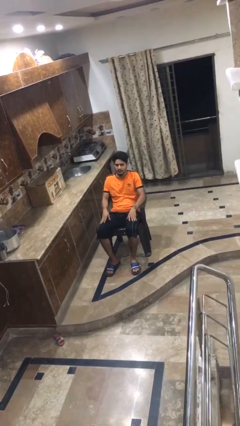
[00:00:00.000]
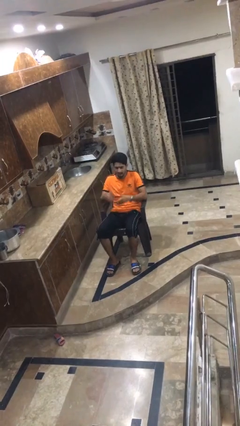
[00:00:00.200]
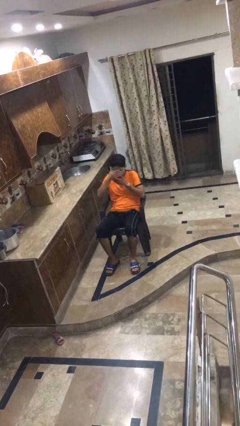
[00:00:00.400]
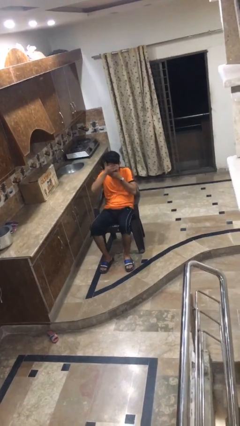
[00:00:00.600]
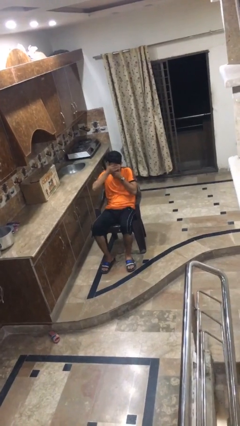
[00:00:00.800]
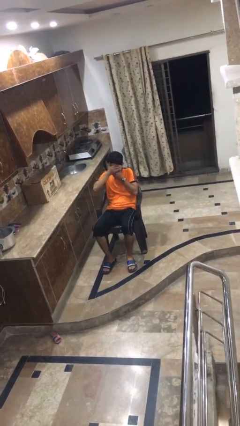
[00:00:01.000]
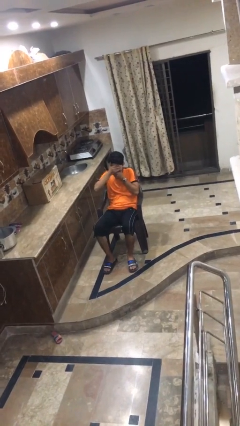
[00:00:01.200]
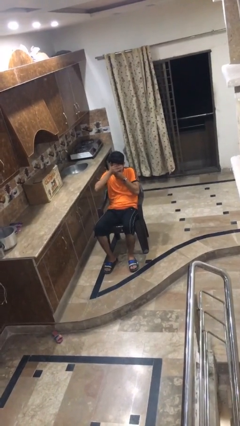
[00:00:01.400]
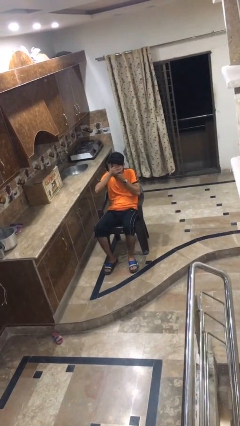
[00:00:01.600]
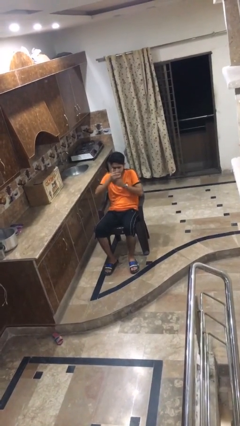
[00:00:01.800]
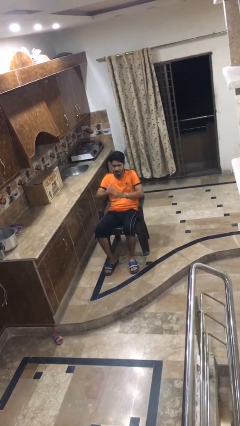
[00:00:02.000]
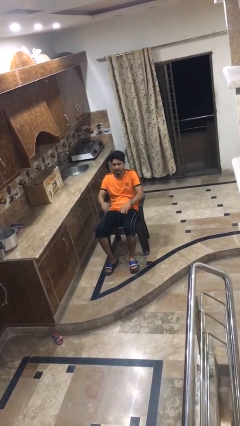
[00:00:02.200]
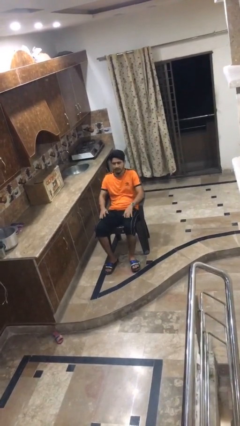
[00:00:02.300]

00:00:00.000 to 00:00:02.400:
person covers face with hands

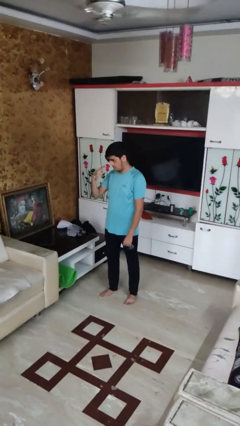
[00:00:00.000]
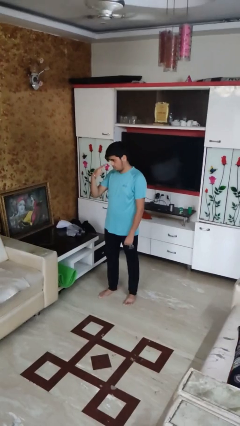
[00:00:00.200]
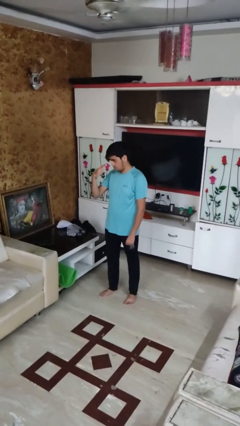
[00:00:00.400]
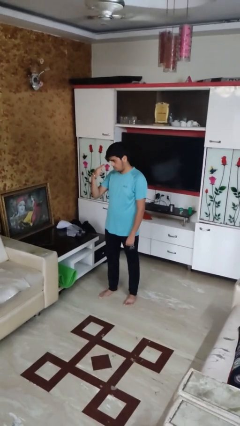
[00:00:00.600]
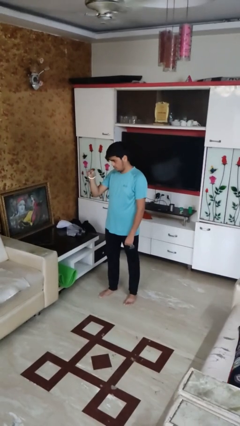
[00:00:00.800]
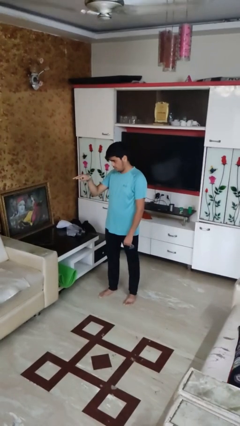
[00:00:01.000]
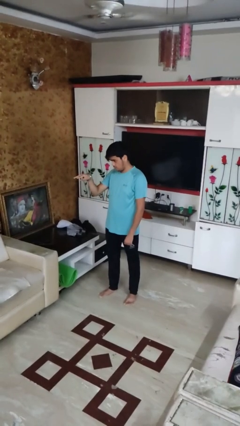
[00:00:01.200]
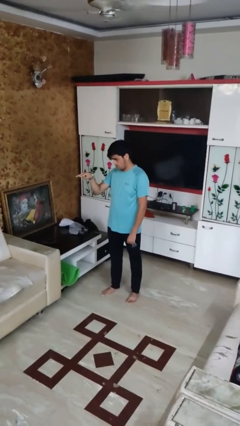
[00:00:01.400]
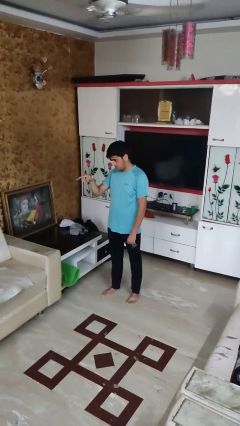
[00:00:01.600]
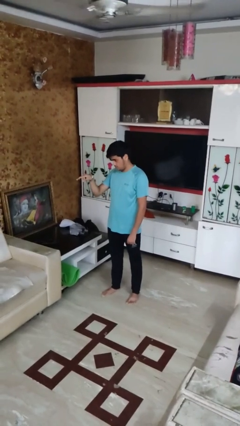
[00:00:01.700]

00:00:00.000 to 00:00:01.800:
person gestures watch closely

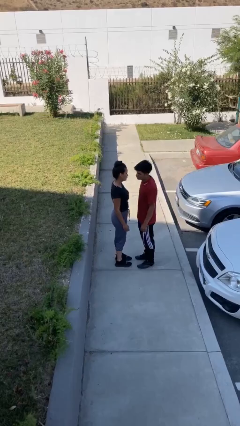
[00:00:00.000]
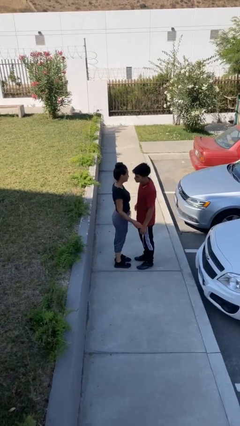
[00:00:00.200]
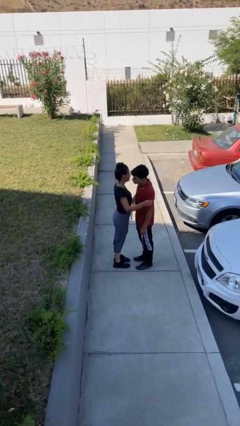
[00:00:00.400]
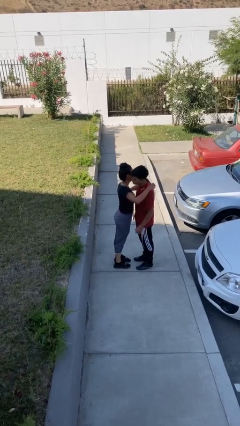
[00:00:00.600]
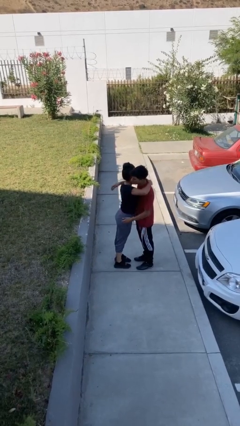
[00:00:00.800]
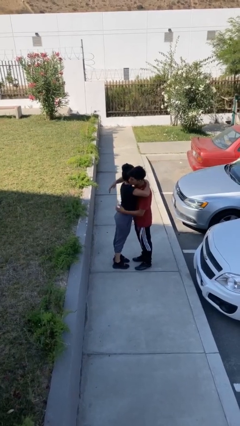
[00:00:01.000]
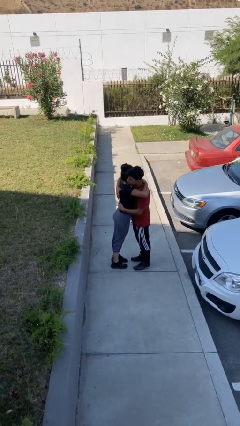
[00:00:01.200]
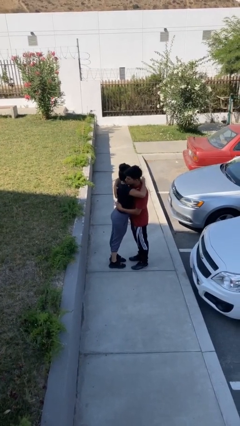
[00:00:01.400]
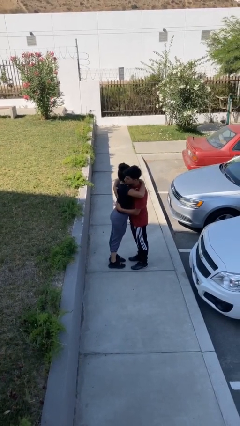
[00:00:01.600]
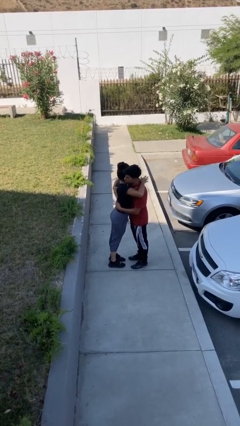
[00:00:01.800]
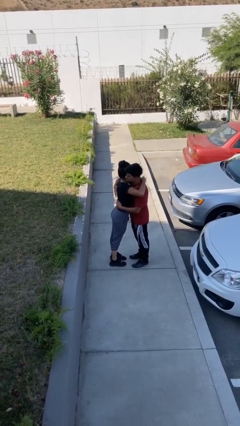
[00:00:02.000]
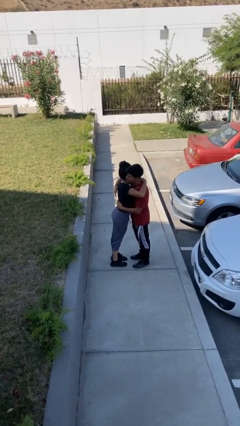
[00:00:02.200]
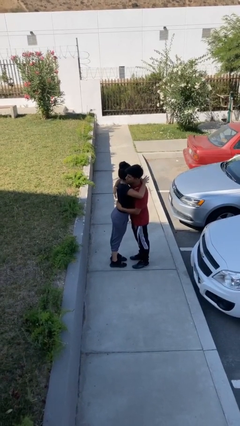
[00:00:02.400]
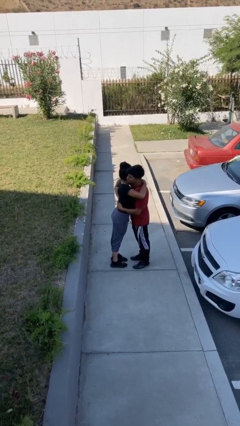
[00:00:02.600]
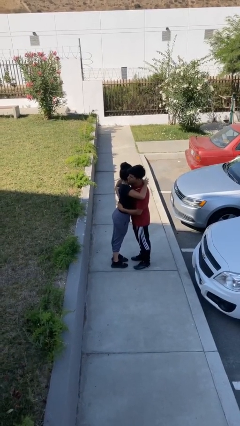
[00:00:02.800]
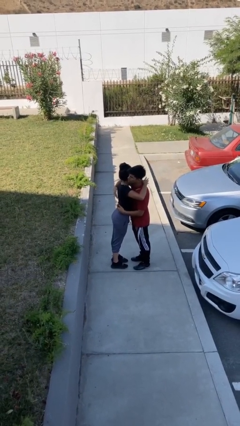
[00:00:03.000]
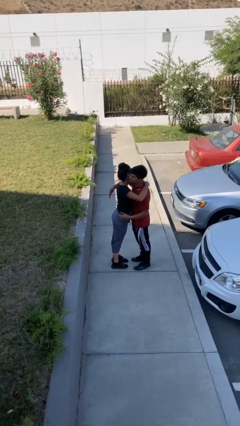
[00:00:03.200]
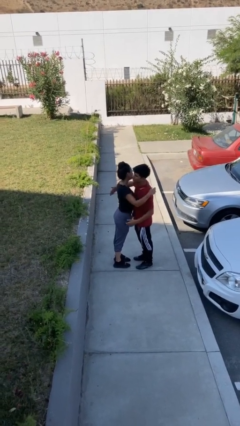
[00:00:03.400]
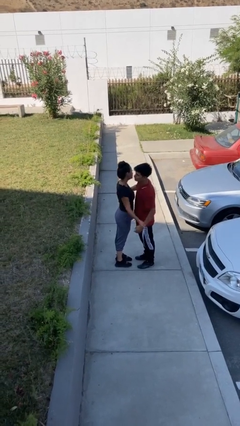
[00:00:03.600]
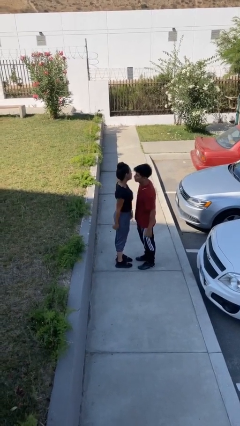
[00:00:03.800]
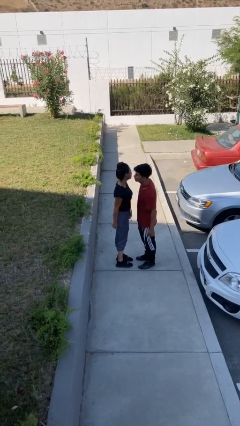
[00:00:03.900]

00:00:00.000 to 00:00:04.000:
person embraces person

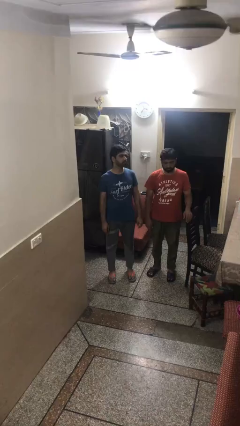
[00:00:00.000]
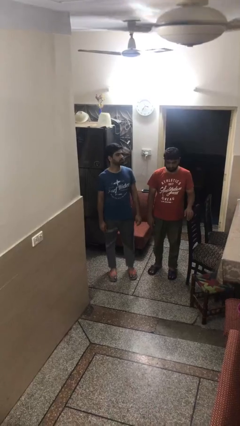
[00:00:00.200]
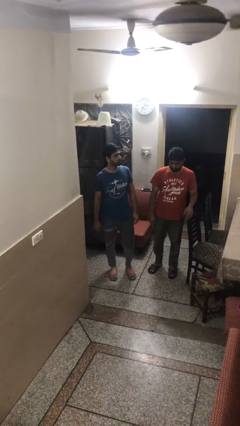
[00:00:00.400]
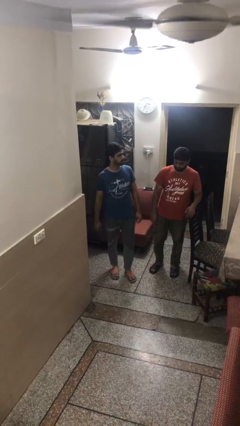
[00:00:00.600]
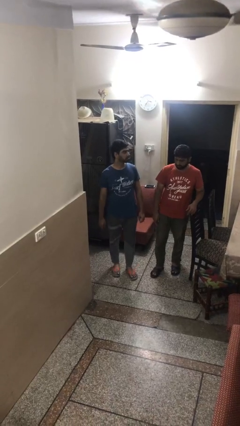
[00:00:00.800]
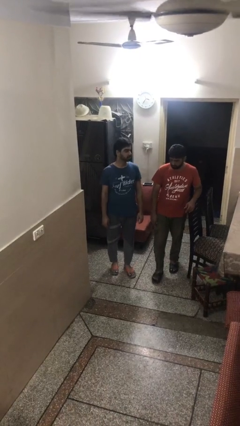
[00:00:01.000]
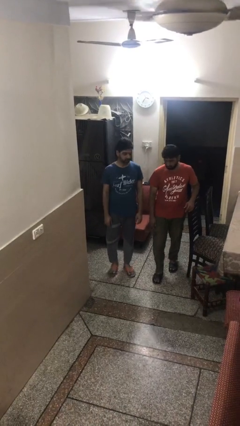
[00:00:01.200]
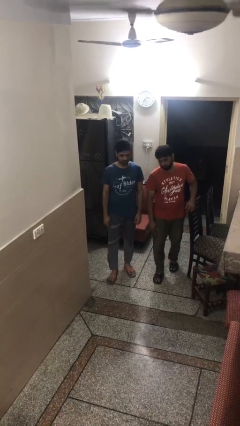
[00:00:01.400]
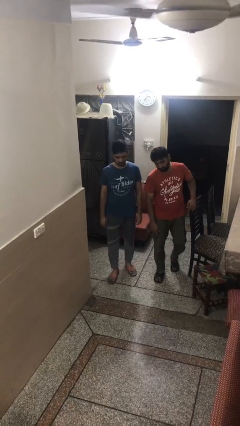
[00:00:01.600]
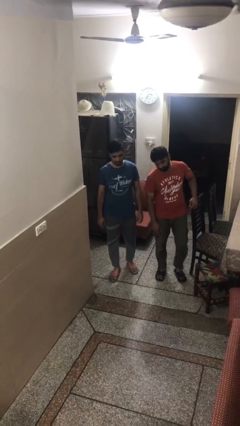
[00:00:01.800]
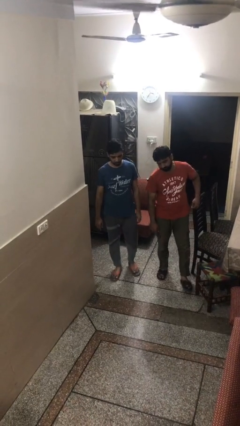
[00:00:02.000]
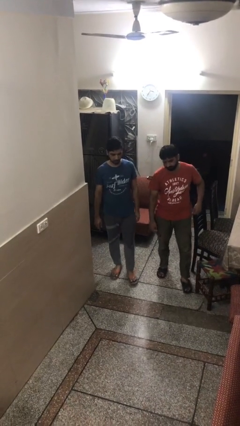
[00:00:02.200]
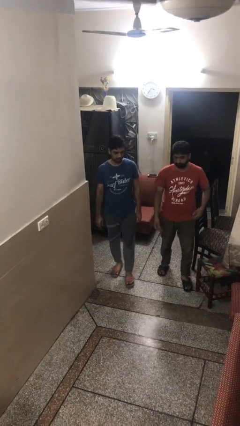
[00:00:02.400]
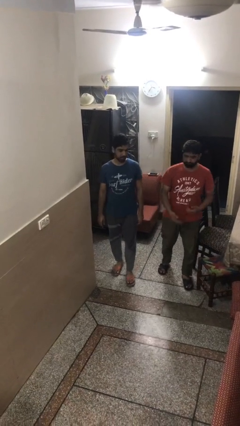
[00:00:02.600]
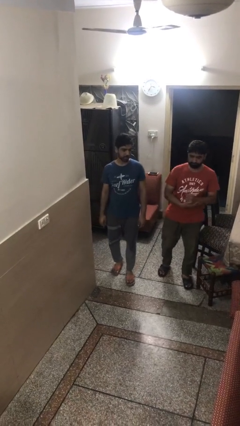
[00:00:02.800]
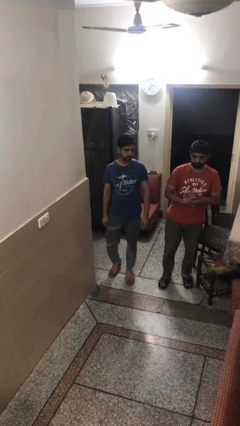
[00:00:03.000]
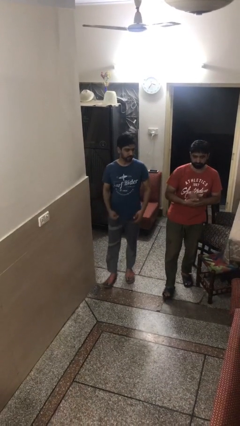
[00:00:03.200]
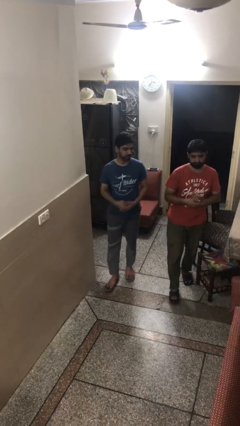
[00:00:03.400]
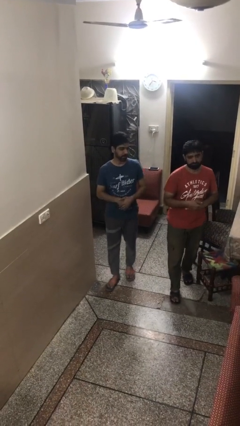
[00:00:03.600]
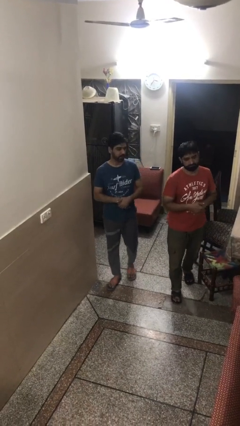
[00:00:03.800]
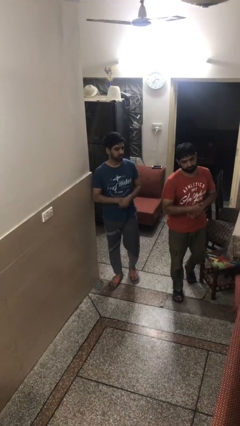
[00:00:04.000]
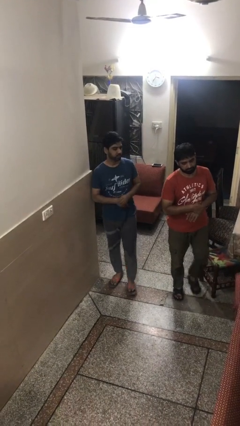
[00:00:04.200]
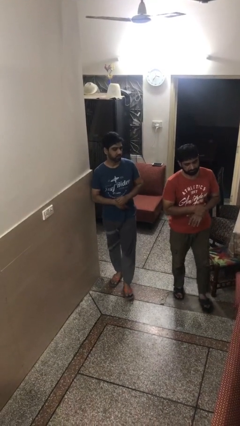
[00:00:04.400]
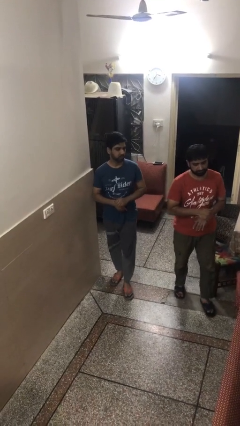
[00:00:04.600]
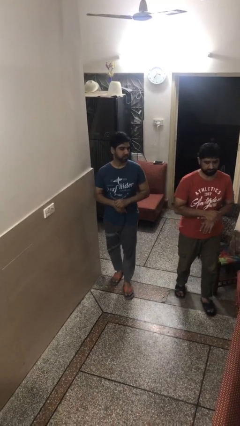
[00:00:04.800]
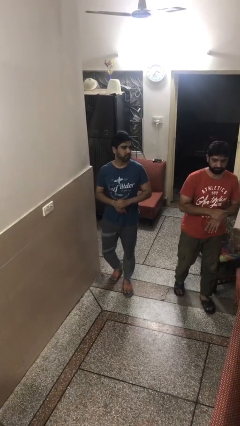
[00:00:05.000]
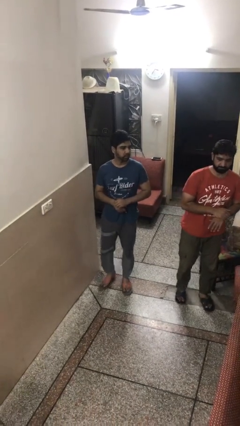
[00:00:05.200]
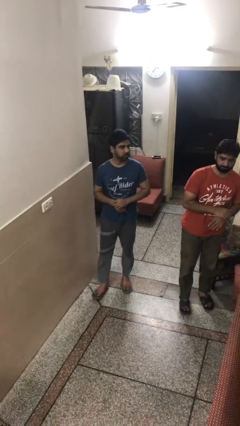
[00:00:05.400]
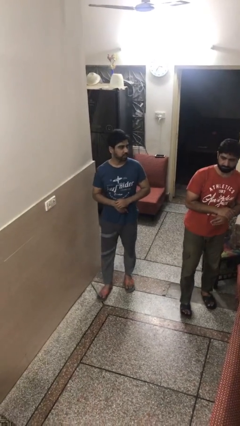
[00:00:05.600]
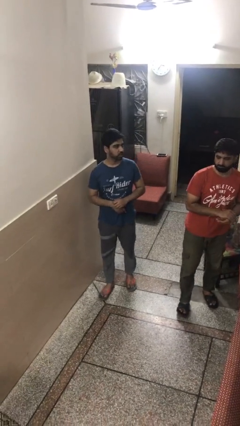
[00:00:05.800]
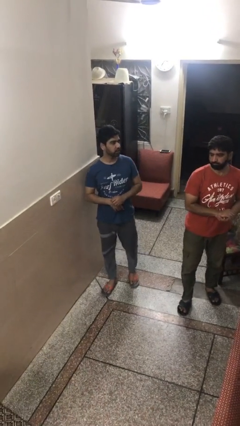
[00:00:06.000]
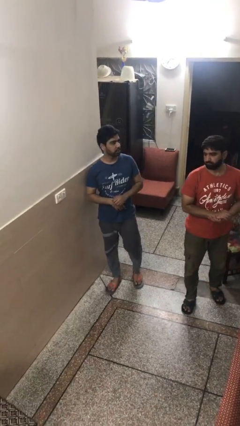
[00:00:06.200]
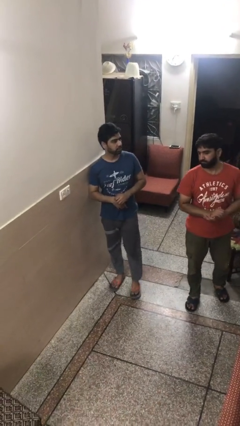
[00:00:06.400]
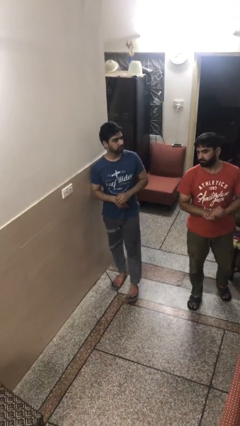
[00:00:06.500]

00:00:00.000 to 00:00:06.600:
person talks to person

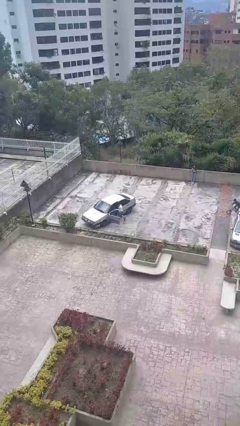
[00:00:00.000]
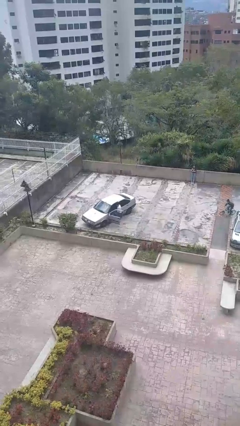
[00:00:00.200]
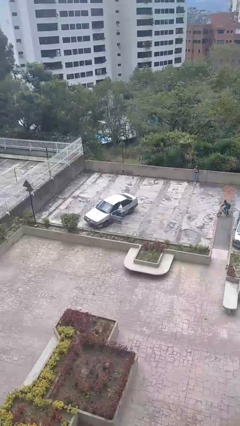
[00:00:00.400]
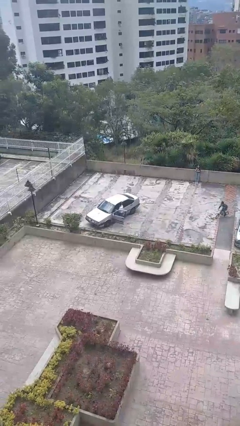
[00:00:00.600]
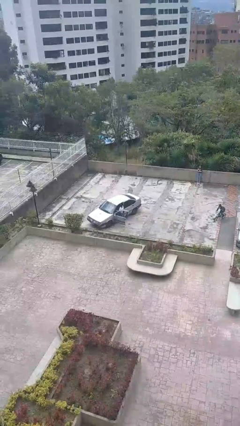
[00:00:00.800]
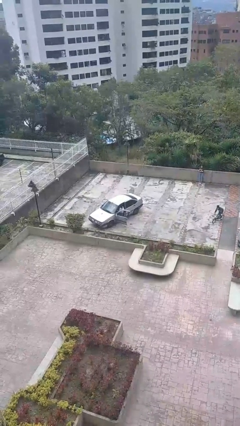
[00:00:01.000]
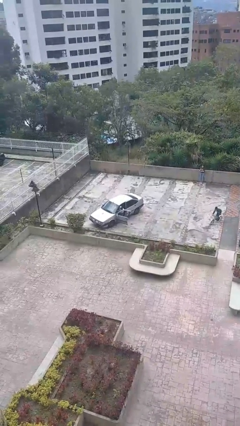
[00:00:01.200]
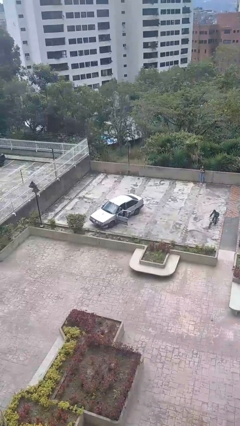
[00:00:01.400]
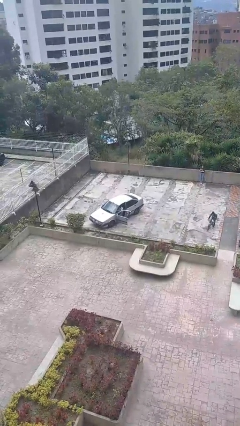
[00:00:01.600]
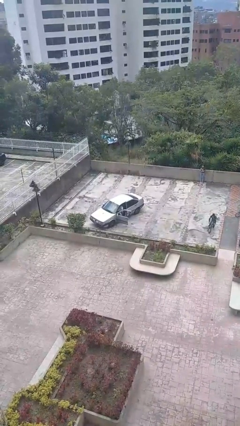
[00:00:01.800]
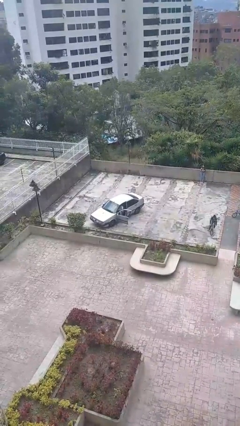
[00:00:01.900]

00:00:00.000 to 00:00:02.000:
person enters car

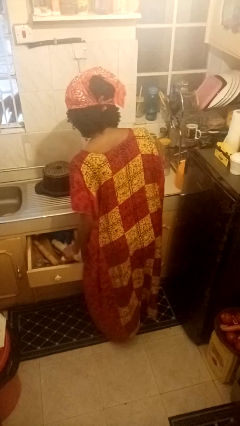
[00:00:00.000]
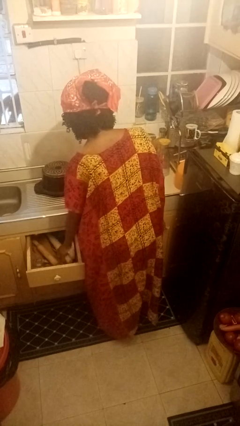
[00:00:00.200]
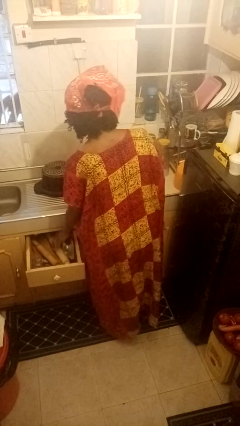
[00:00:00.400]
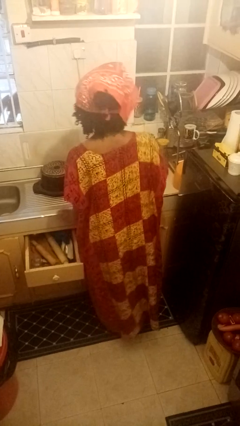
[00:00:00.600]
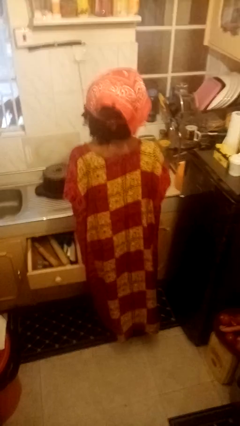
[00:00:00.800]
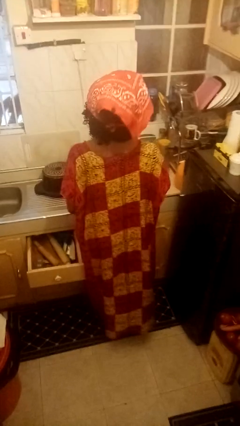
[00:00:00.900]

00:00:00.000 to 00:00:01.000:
person puts object into kitchen drawer
